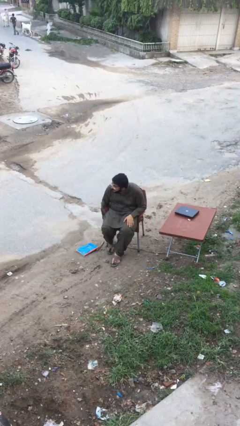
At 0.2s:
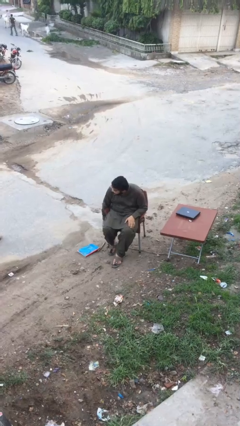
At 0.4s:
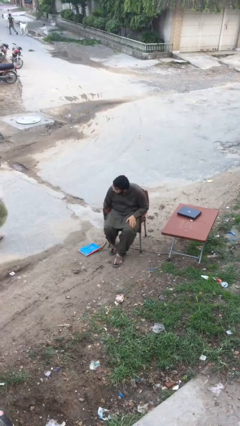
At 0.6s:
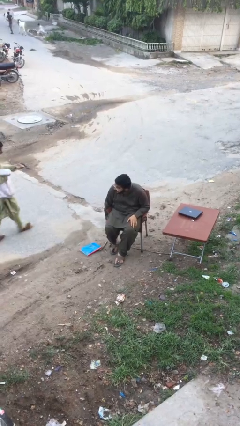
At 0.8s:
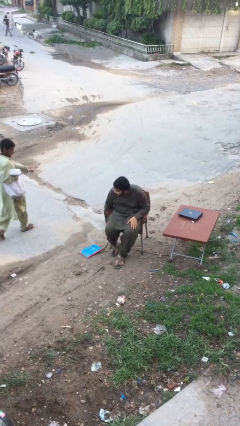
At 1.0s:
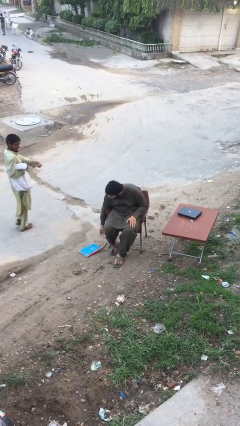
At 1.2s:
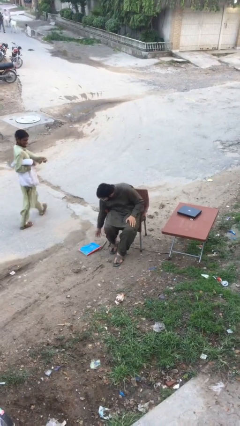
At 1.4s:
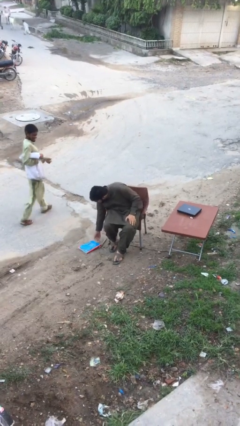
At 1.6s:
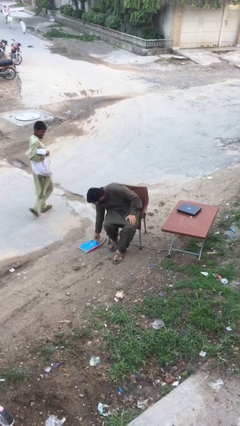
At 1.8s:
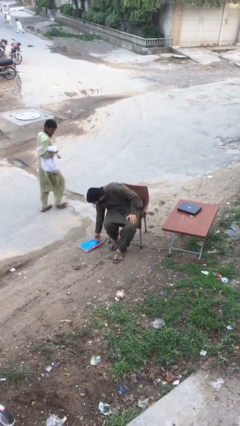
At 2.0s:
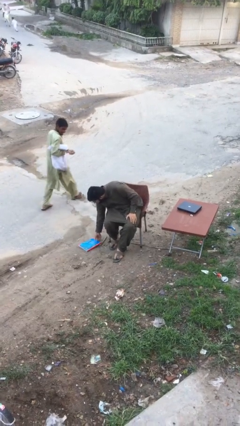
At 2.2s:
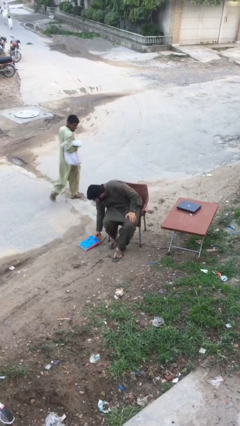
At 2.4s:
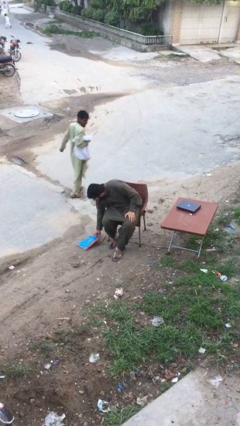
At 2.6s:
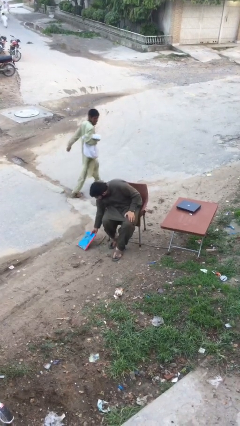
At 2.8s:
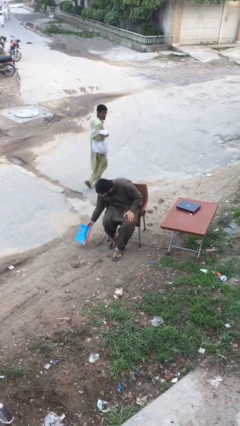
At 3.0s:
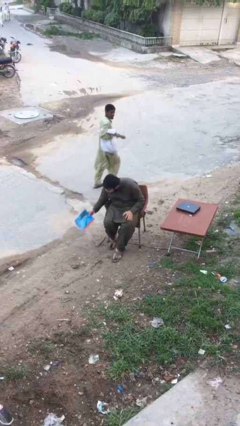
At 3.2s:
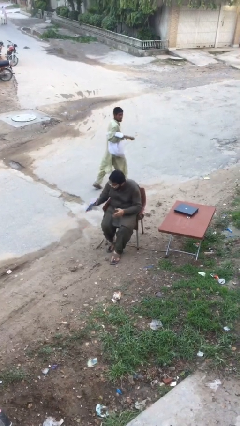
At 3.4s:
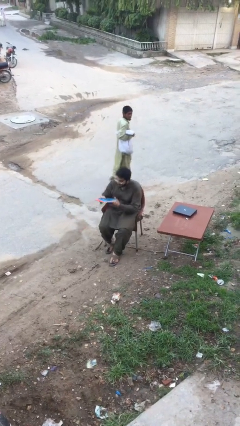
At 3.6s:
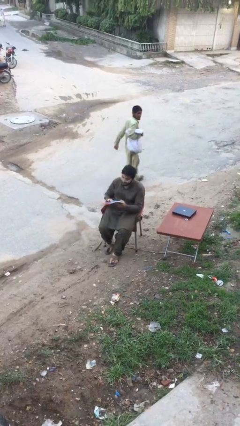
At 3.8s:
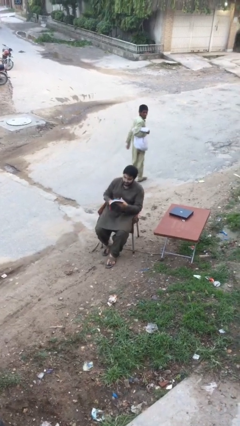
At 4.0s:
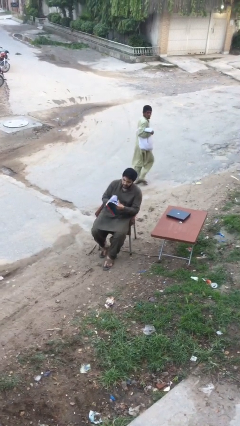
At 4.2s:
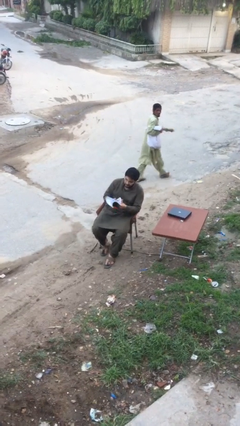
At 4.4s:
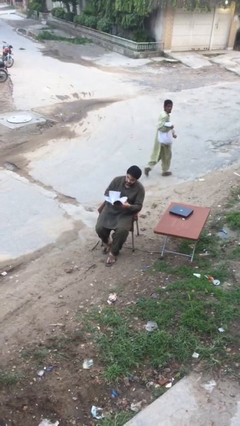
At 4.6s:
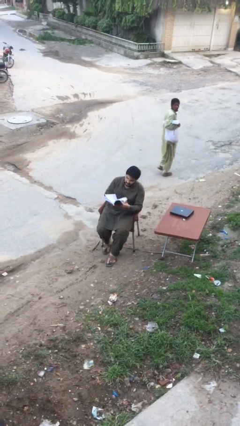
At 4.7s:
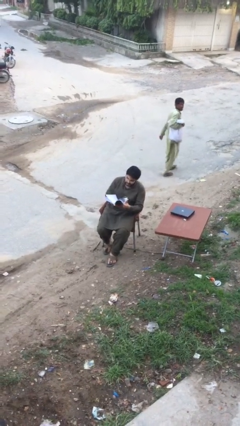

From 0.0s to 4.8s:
person picks up object from floor

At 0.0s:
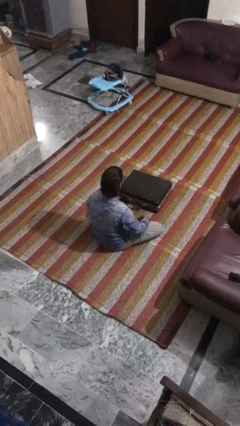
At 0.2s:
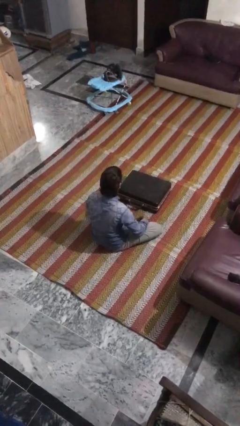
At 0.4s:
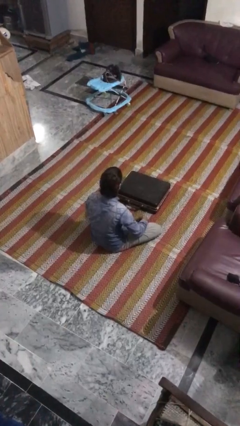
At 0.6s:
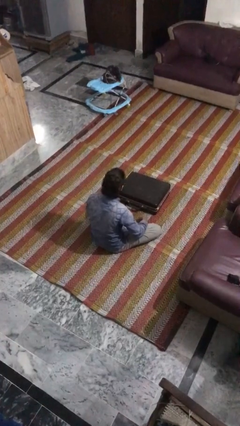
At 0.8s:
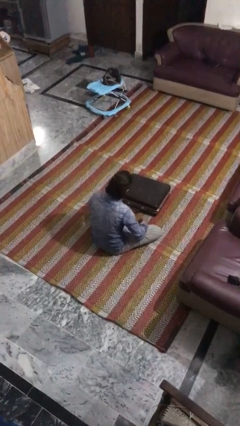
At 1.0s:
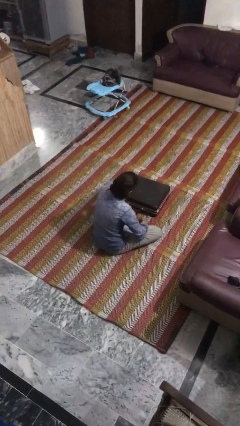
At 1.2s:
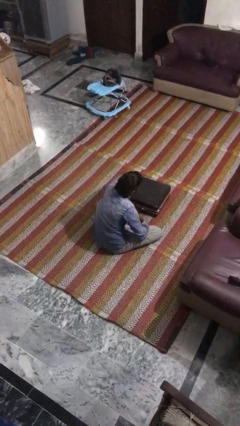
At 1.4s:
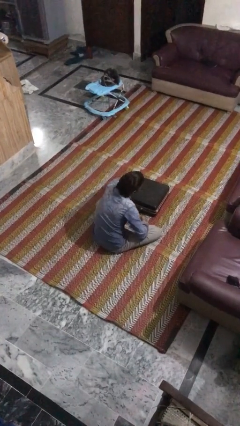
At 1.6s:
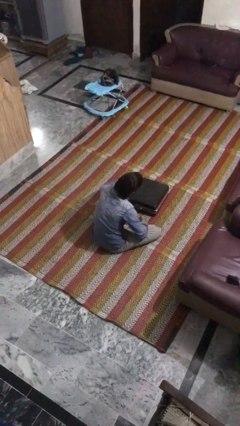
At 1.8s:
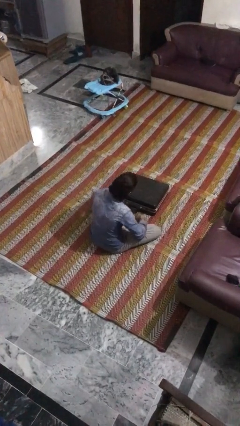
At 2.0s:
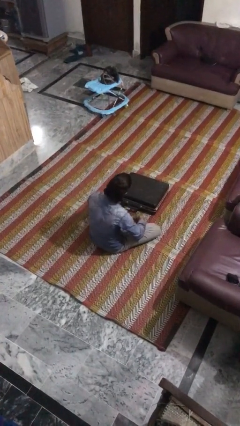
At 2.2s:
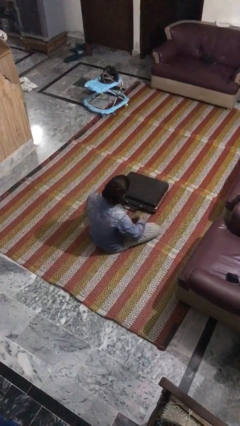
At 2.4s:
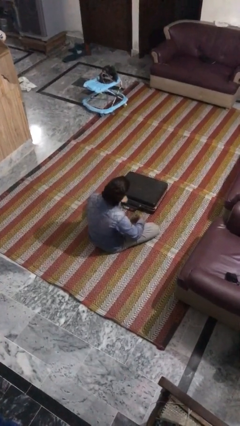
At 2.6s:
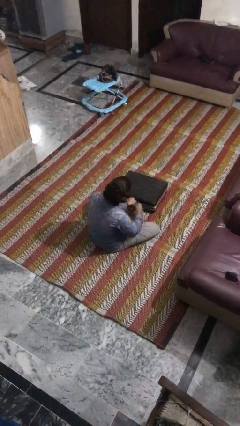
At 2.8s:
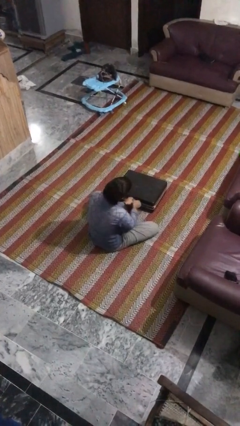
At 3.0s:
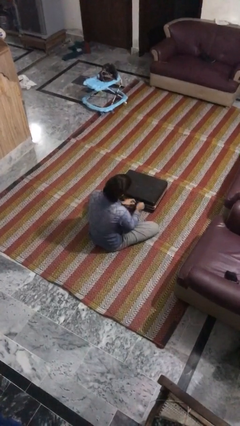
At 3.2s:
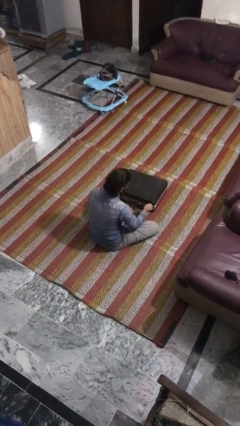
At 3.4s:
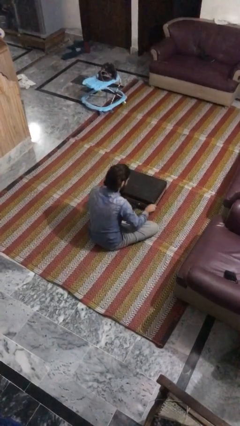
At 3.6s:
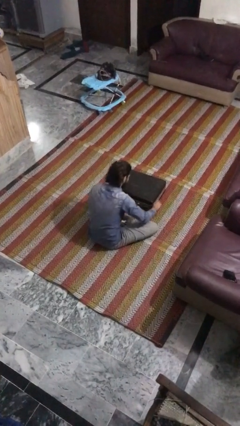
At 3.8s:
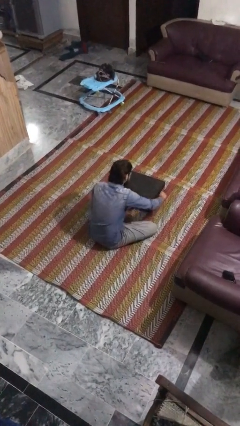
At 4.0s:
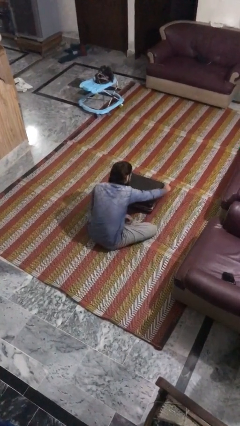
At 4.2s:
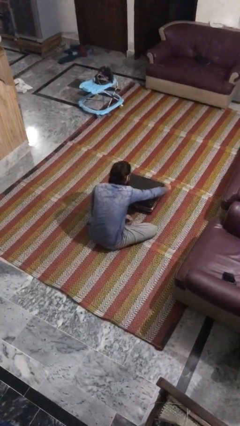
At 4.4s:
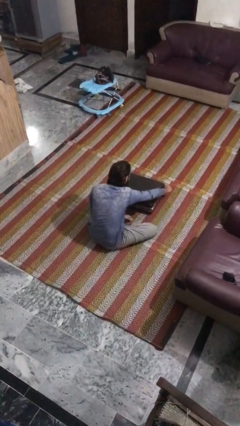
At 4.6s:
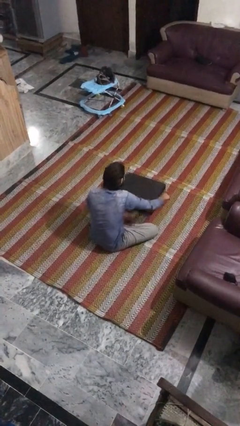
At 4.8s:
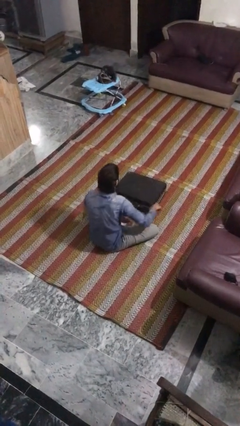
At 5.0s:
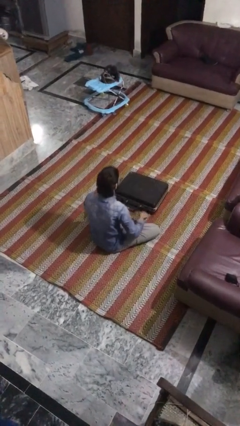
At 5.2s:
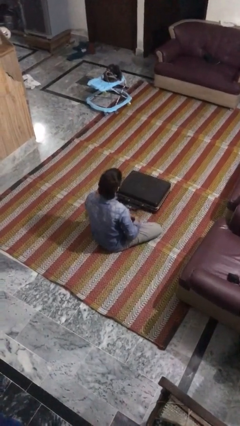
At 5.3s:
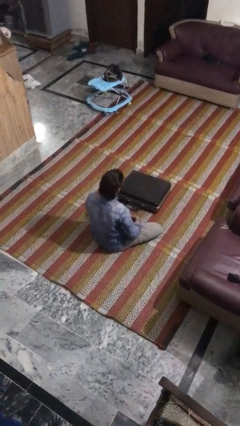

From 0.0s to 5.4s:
person closes suitcase

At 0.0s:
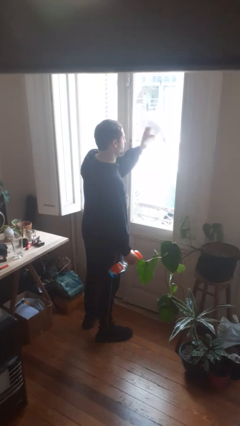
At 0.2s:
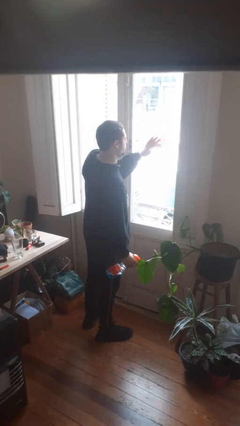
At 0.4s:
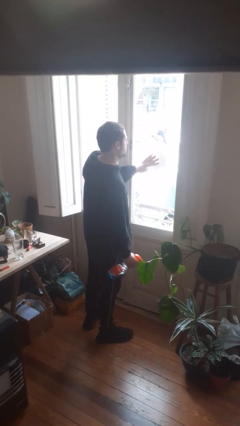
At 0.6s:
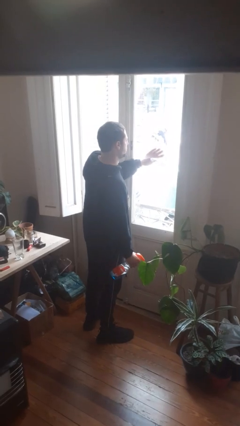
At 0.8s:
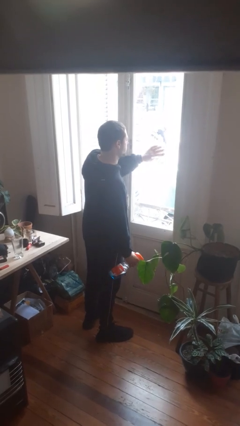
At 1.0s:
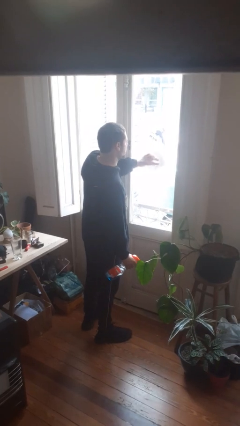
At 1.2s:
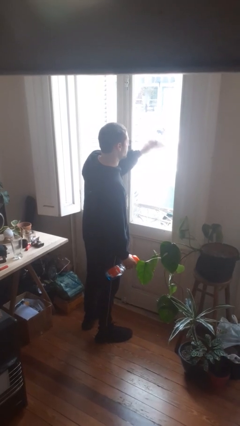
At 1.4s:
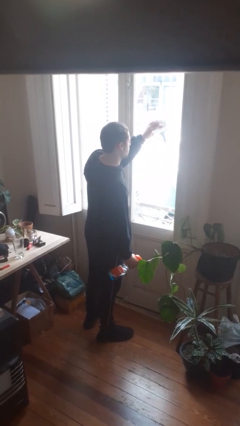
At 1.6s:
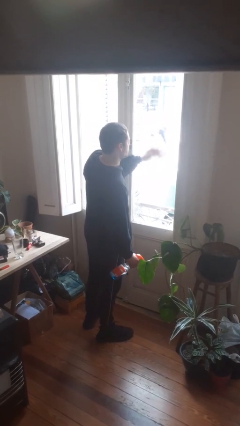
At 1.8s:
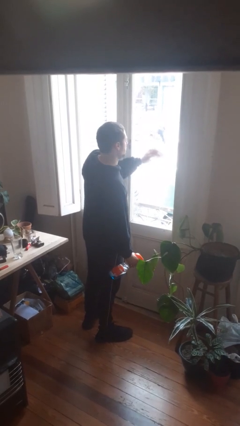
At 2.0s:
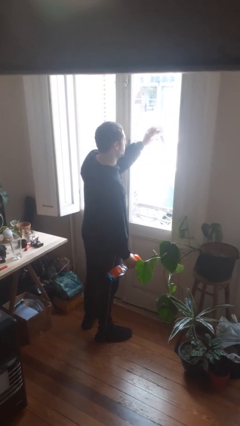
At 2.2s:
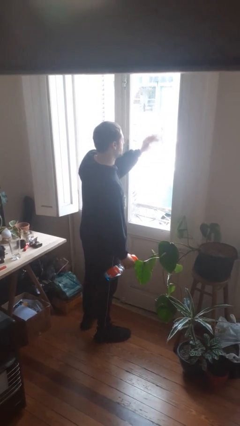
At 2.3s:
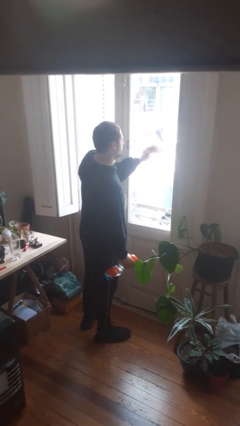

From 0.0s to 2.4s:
person washes window

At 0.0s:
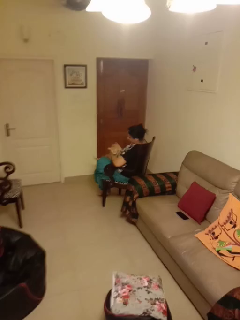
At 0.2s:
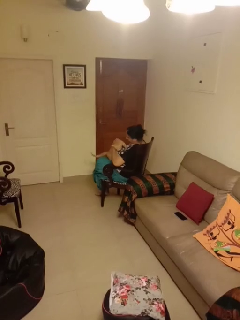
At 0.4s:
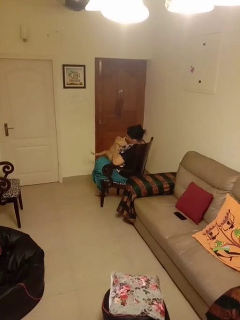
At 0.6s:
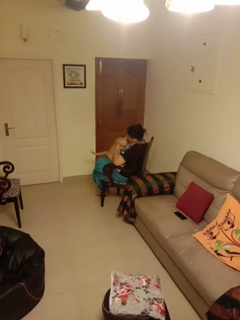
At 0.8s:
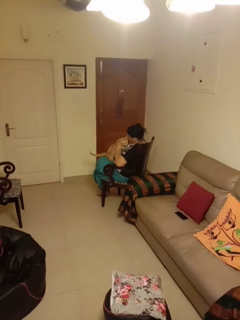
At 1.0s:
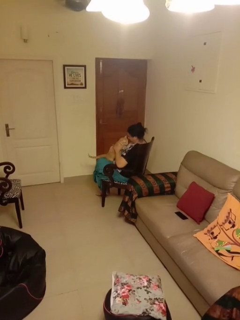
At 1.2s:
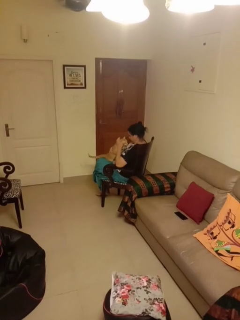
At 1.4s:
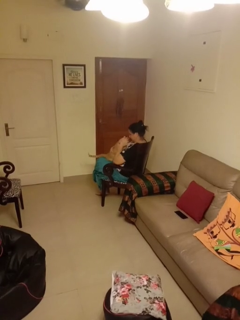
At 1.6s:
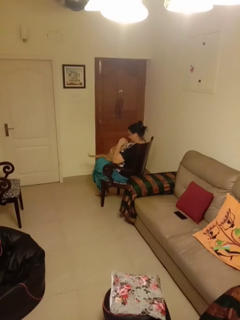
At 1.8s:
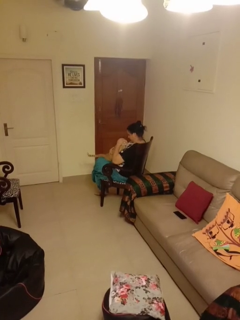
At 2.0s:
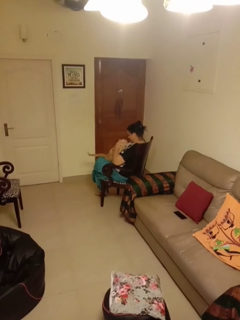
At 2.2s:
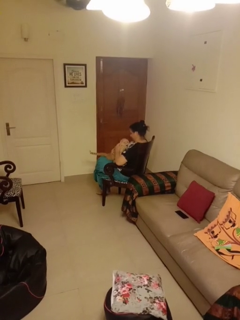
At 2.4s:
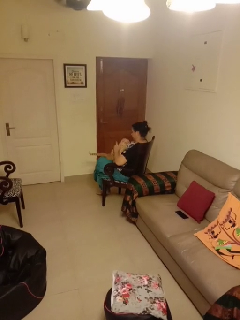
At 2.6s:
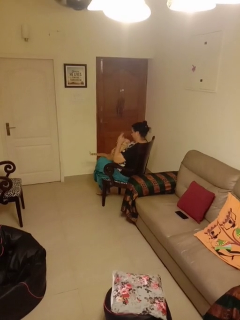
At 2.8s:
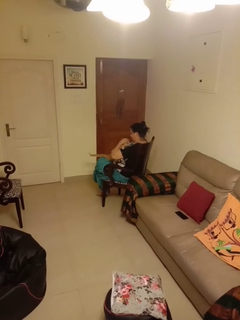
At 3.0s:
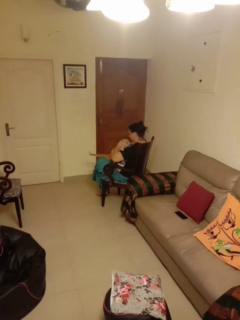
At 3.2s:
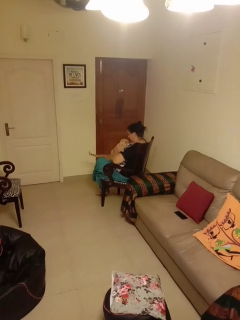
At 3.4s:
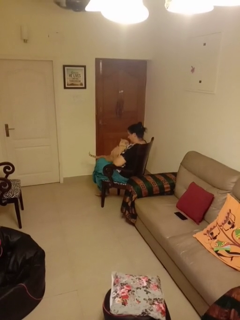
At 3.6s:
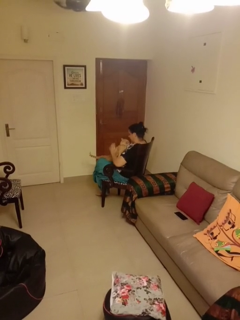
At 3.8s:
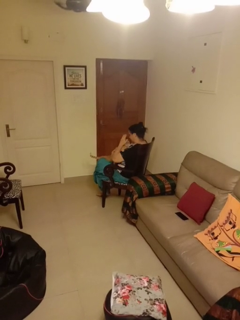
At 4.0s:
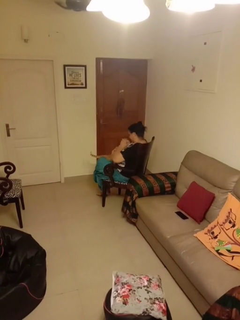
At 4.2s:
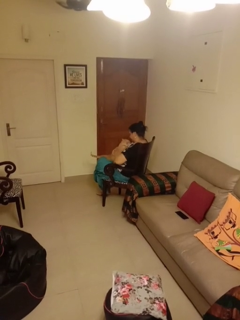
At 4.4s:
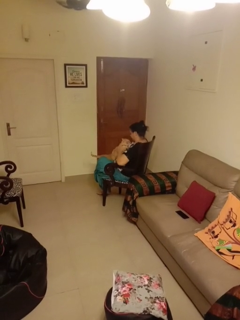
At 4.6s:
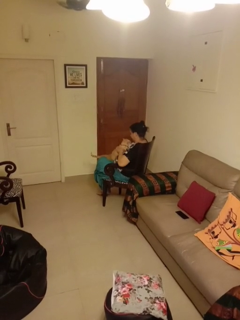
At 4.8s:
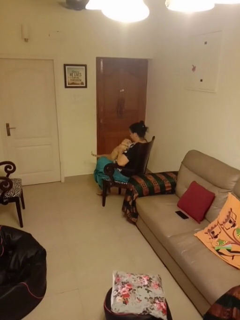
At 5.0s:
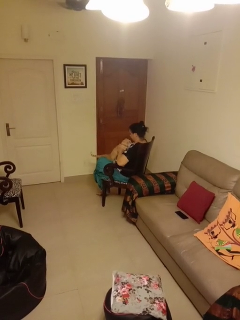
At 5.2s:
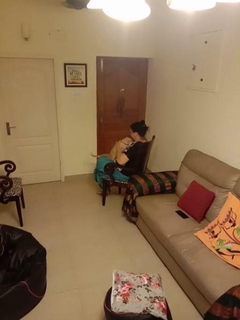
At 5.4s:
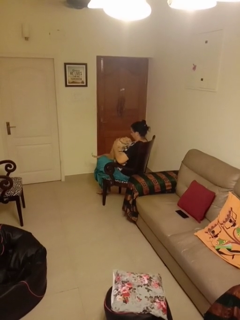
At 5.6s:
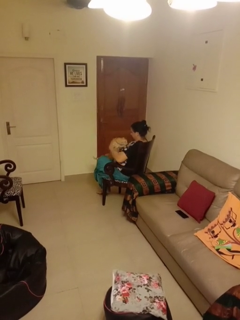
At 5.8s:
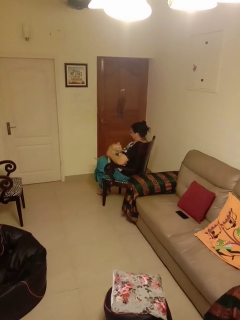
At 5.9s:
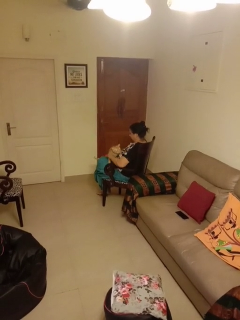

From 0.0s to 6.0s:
person hugs cat

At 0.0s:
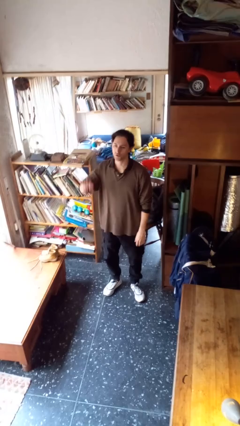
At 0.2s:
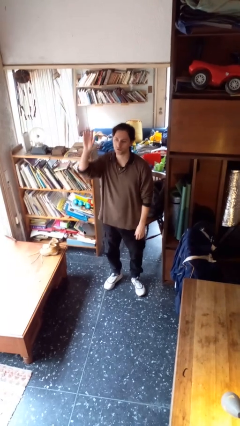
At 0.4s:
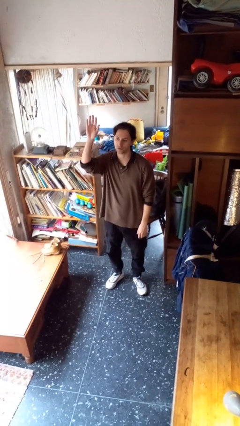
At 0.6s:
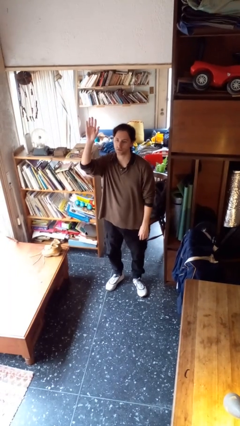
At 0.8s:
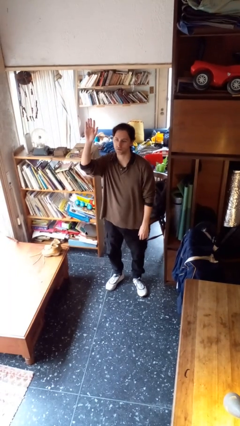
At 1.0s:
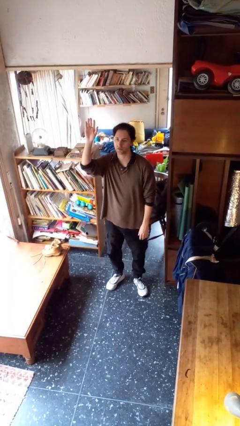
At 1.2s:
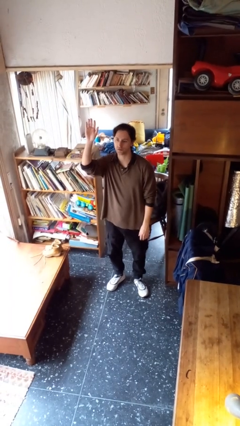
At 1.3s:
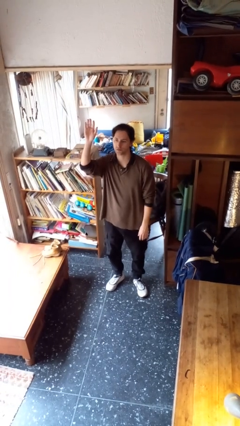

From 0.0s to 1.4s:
person gestures raise hand
